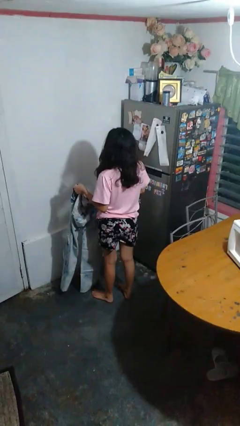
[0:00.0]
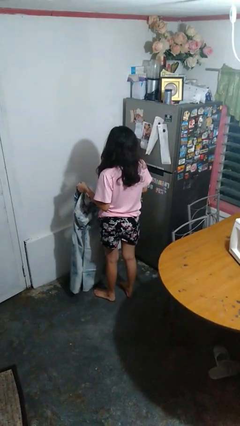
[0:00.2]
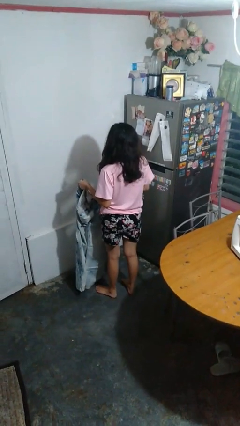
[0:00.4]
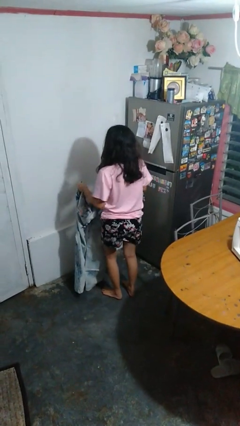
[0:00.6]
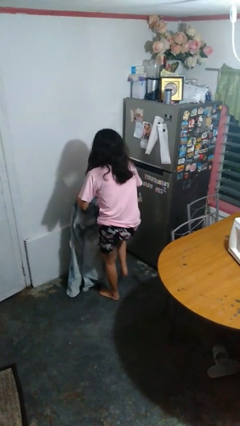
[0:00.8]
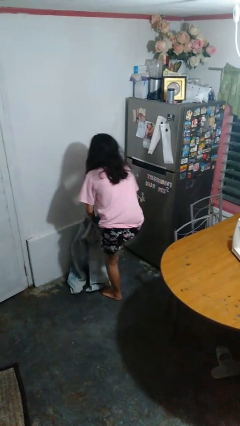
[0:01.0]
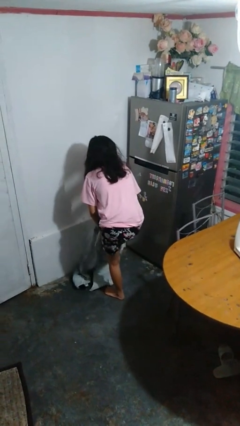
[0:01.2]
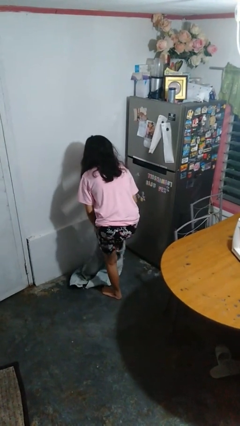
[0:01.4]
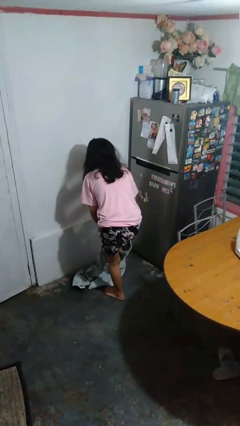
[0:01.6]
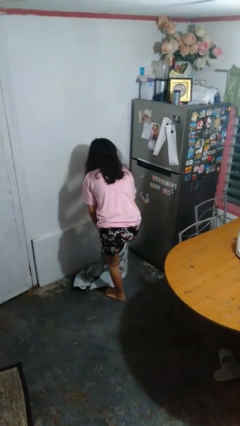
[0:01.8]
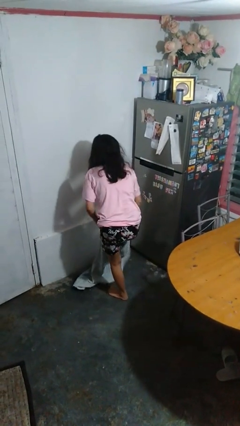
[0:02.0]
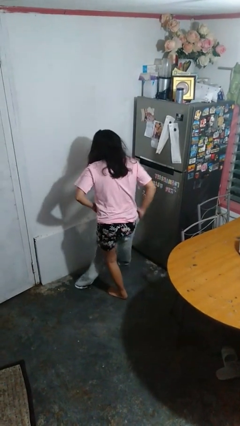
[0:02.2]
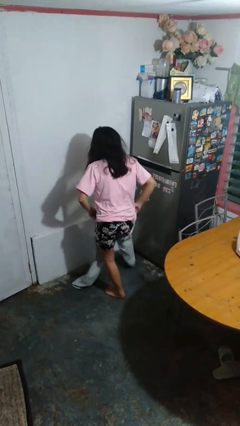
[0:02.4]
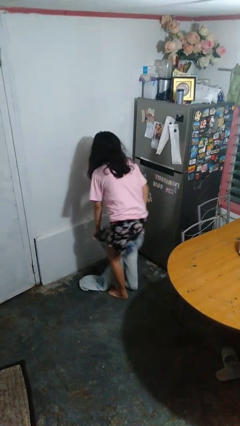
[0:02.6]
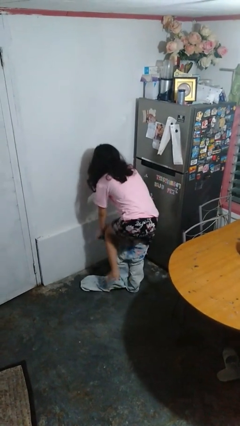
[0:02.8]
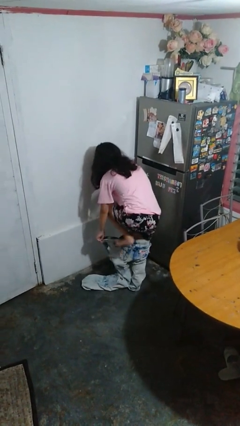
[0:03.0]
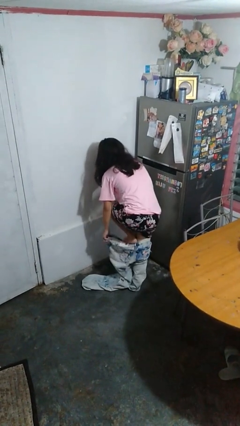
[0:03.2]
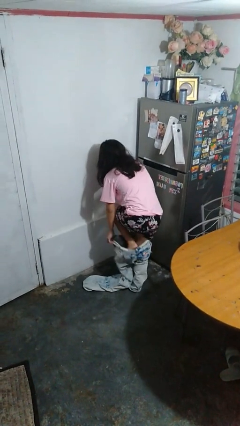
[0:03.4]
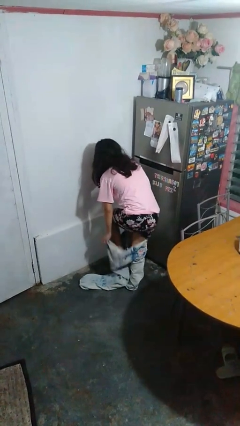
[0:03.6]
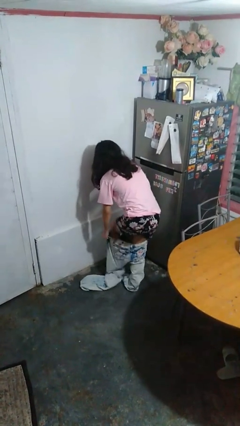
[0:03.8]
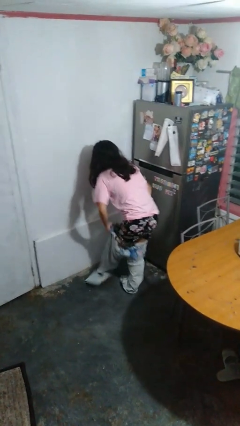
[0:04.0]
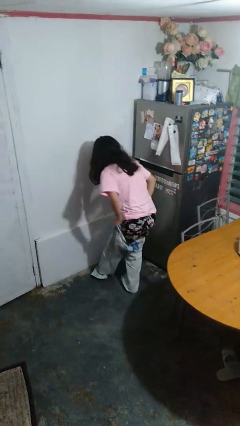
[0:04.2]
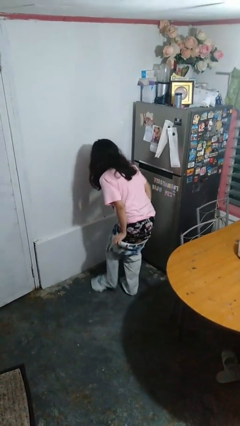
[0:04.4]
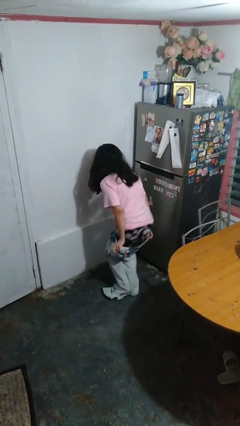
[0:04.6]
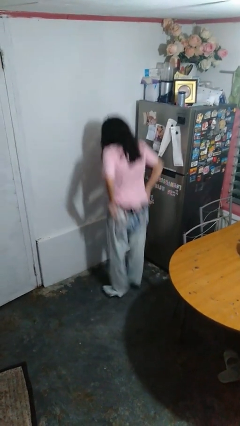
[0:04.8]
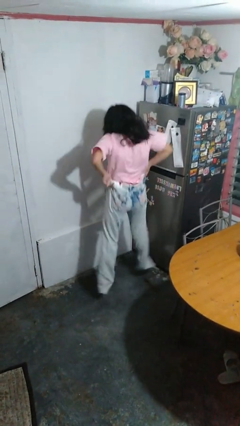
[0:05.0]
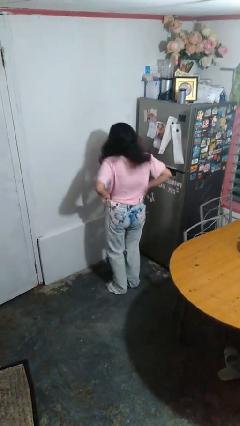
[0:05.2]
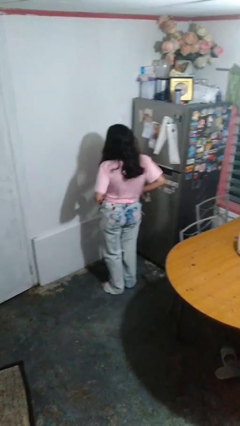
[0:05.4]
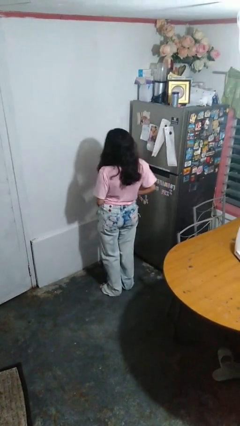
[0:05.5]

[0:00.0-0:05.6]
person puts on pants

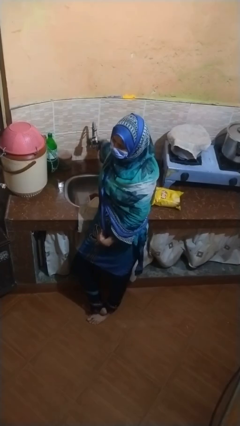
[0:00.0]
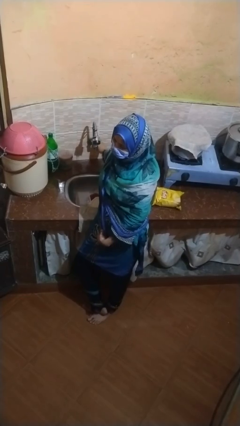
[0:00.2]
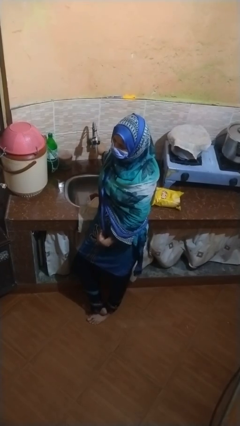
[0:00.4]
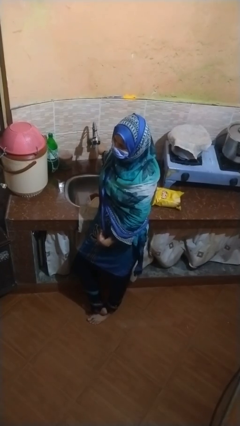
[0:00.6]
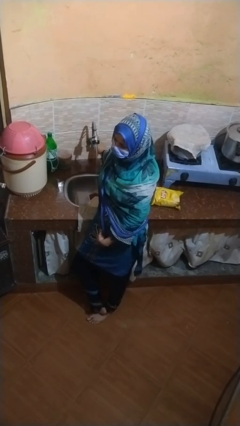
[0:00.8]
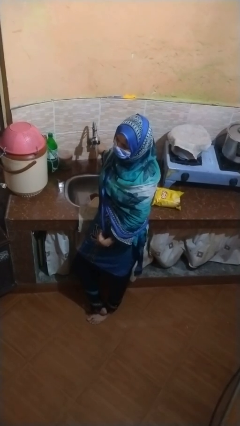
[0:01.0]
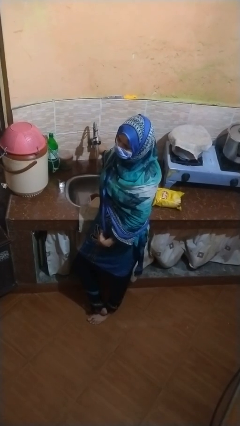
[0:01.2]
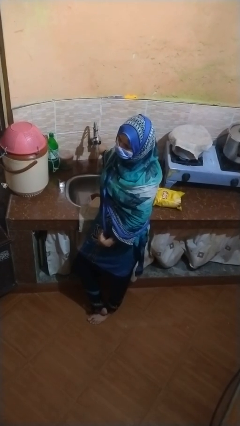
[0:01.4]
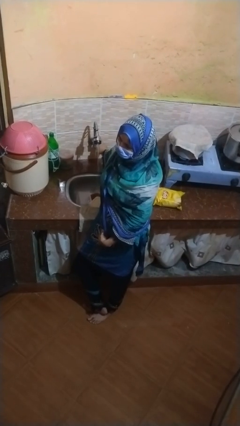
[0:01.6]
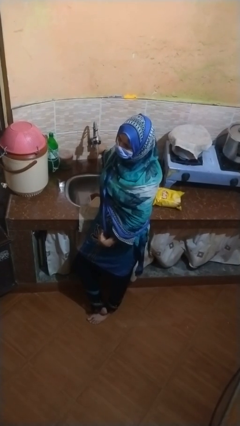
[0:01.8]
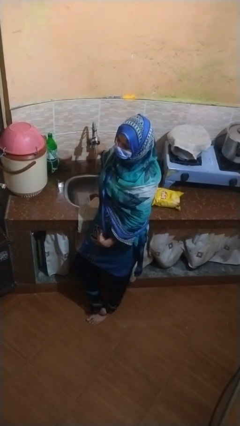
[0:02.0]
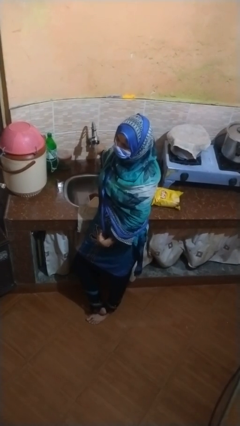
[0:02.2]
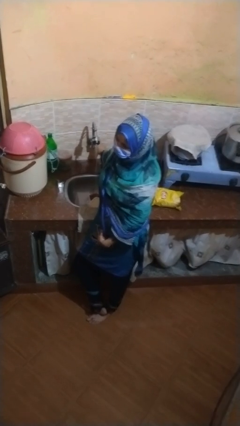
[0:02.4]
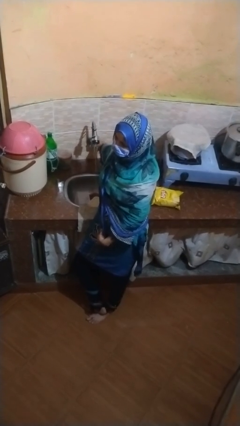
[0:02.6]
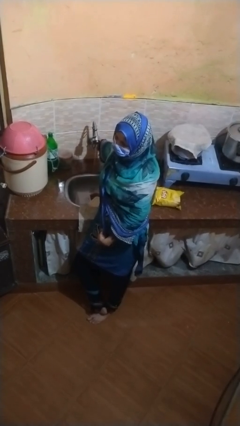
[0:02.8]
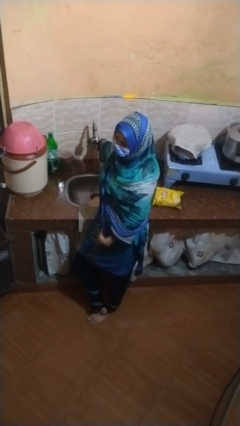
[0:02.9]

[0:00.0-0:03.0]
person turns on faucet

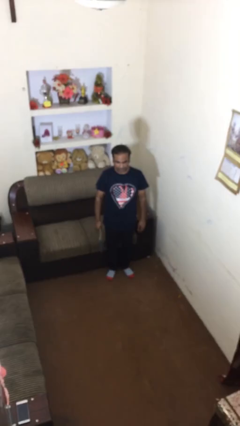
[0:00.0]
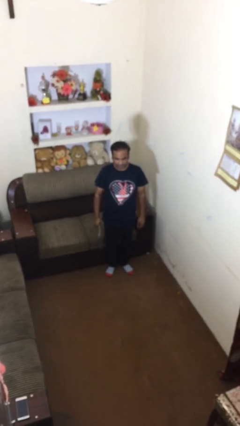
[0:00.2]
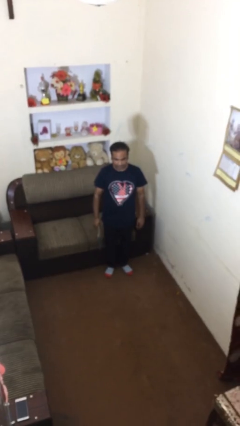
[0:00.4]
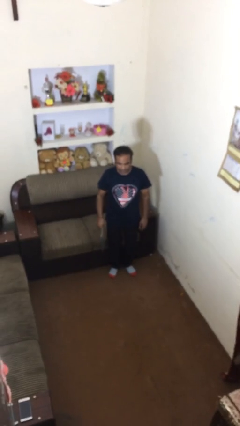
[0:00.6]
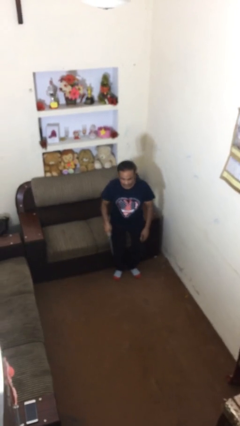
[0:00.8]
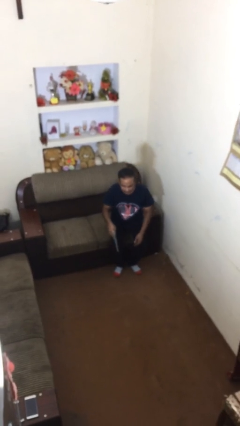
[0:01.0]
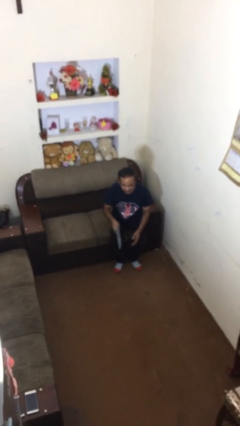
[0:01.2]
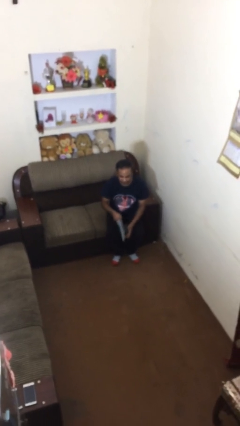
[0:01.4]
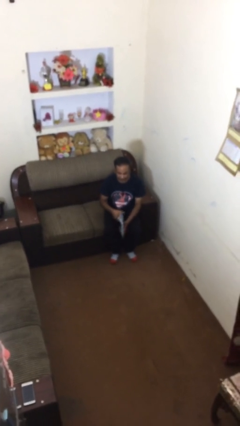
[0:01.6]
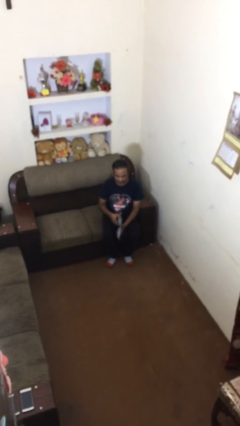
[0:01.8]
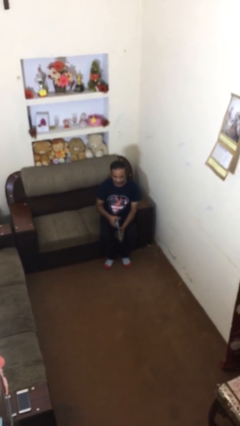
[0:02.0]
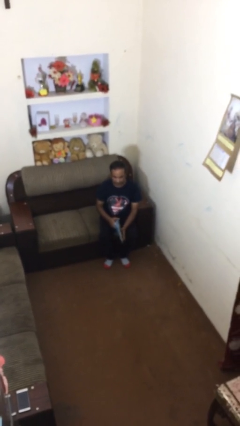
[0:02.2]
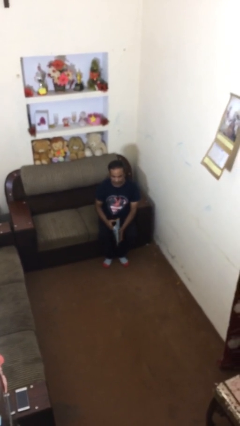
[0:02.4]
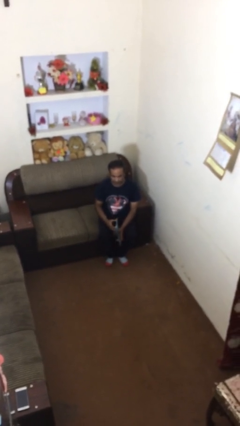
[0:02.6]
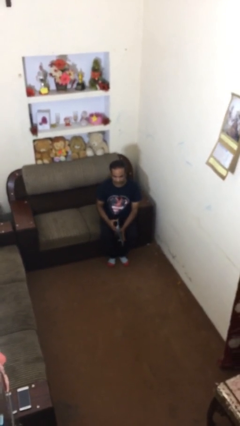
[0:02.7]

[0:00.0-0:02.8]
person sits down

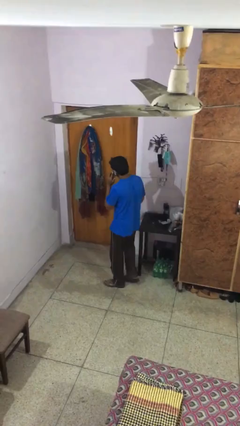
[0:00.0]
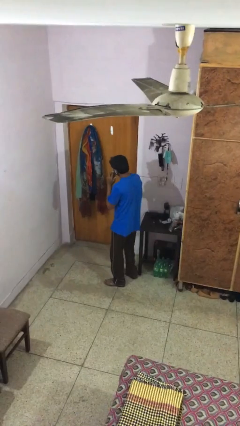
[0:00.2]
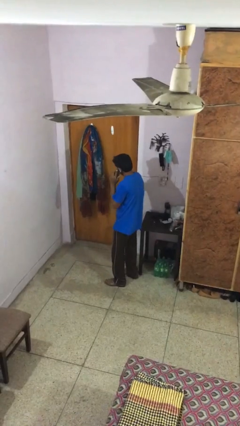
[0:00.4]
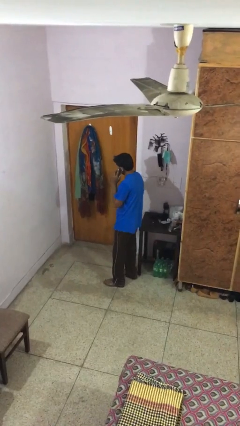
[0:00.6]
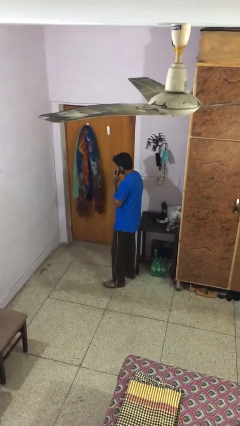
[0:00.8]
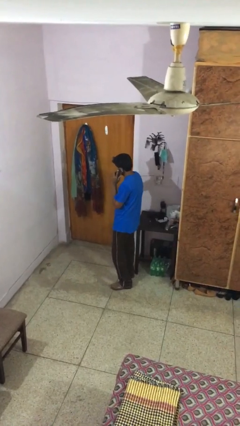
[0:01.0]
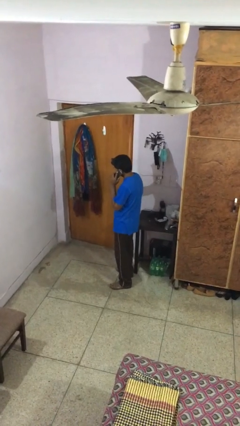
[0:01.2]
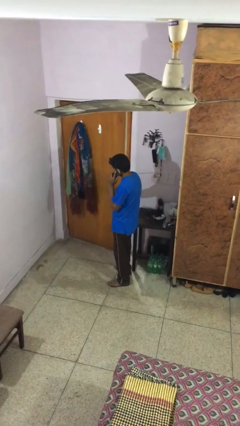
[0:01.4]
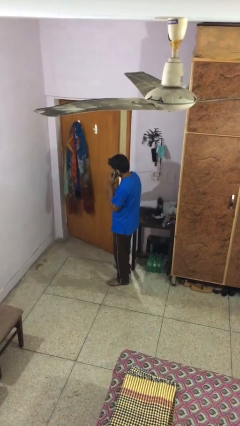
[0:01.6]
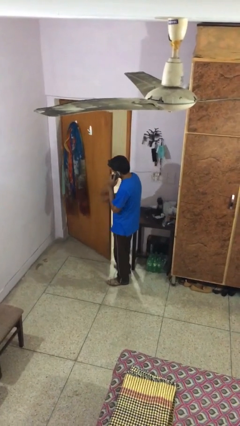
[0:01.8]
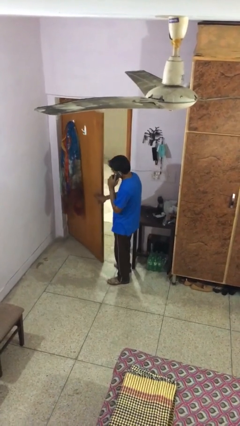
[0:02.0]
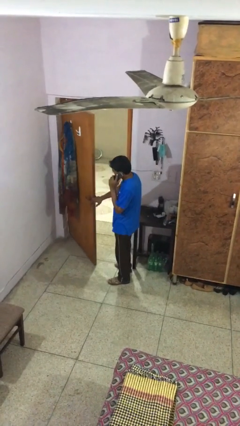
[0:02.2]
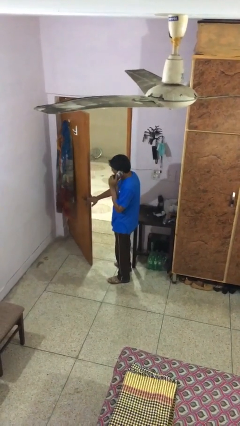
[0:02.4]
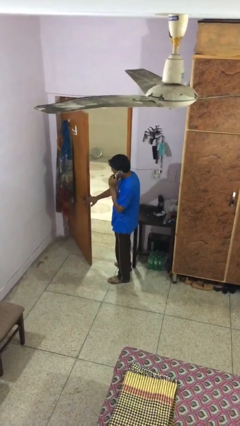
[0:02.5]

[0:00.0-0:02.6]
person opens facility door

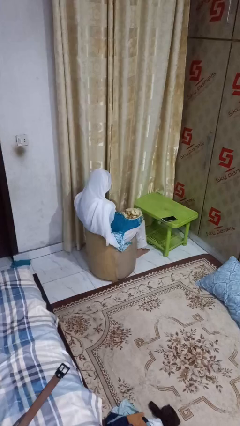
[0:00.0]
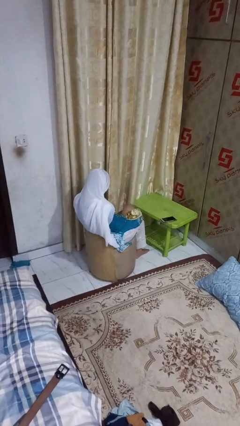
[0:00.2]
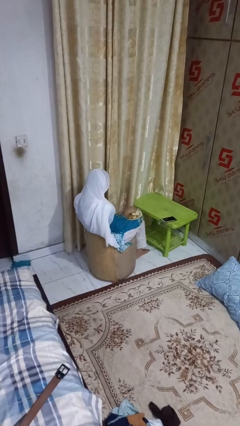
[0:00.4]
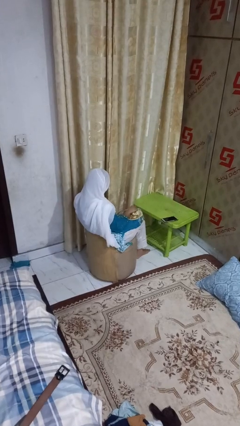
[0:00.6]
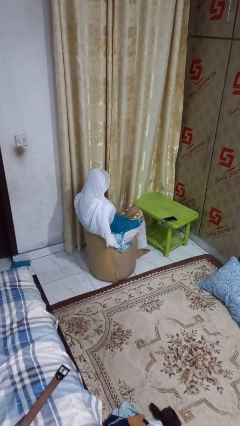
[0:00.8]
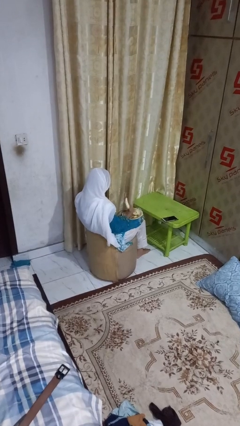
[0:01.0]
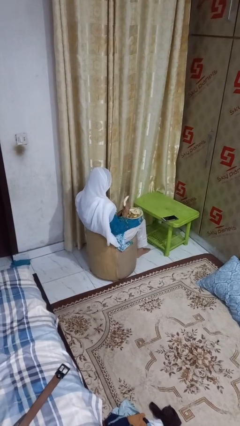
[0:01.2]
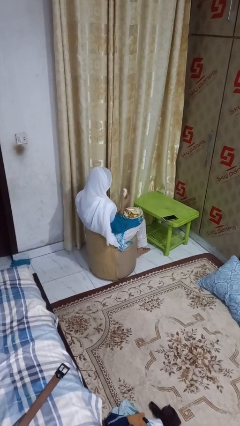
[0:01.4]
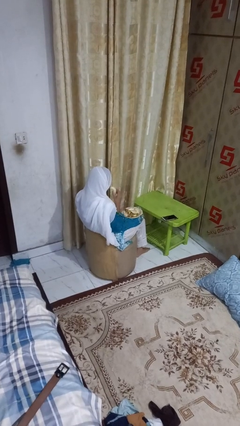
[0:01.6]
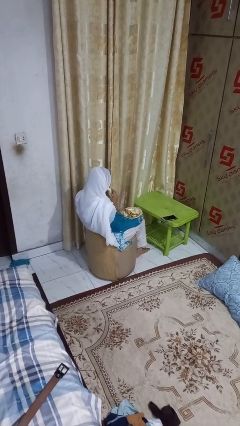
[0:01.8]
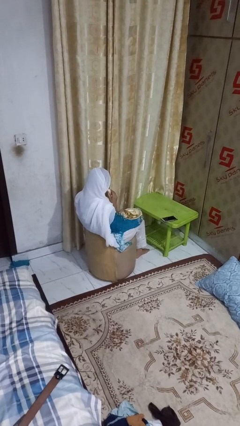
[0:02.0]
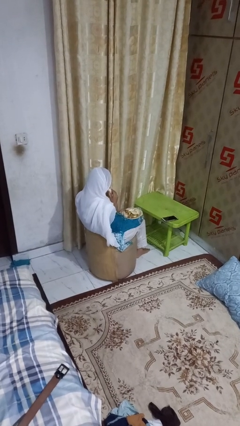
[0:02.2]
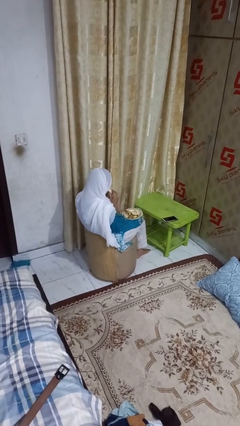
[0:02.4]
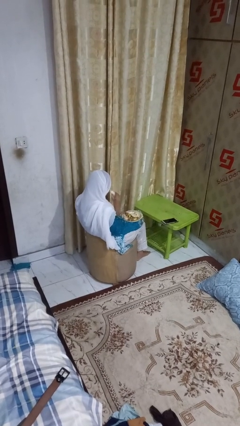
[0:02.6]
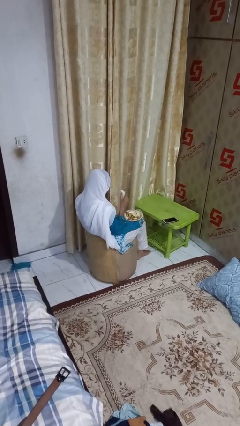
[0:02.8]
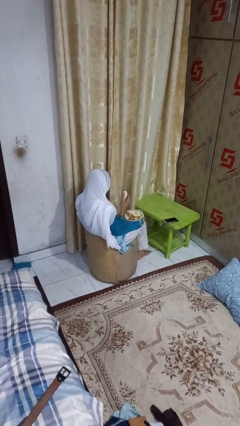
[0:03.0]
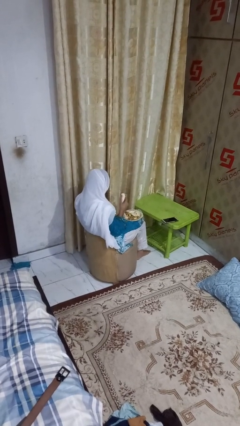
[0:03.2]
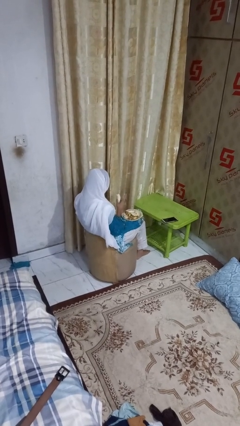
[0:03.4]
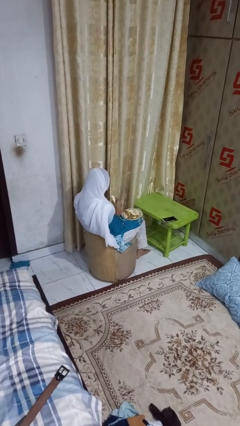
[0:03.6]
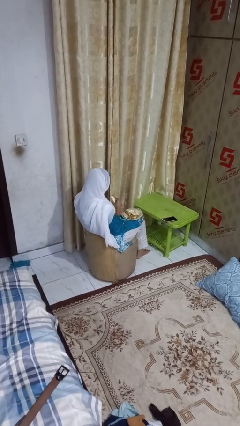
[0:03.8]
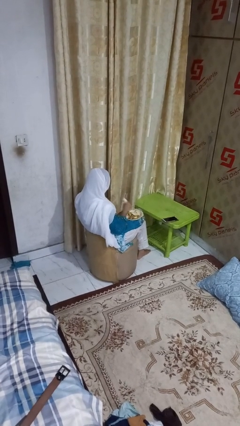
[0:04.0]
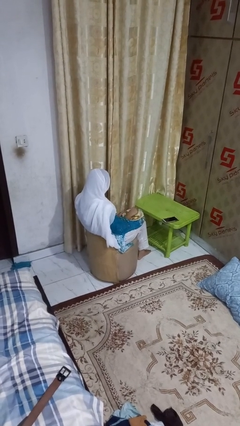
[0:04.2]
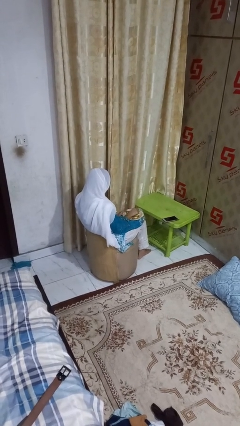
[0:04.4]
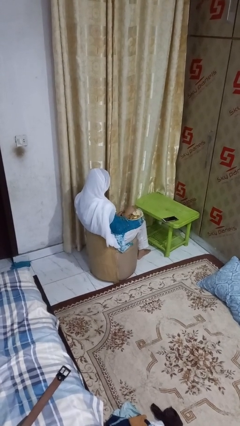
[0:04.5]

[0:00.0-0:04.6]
person eats with hands
